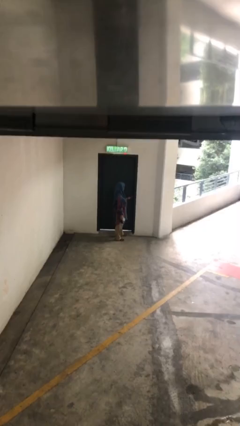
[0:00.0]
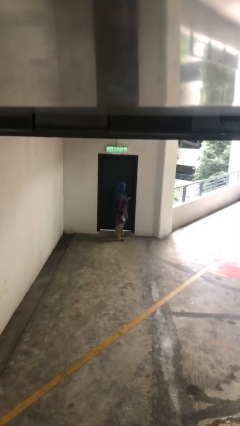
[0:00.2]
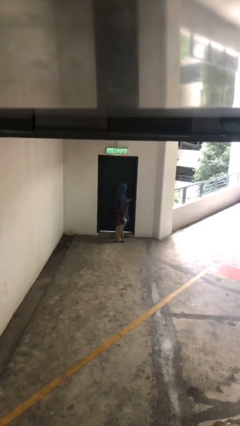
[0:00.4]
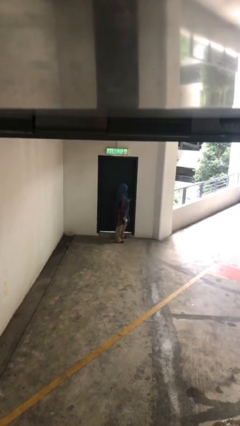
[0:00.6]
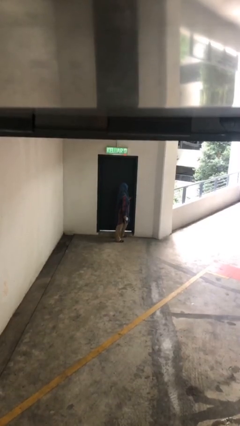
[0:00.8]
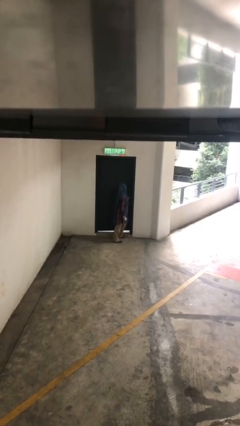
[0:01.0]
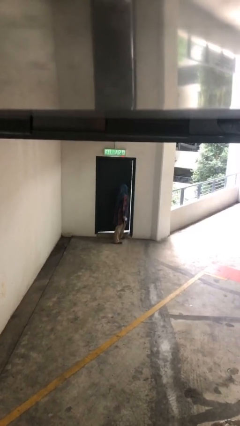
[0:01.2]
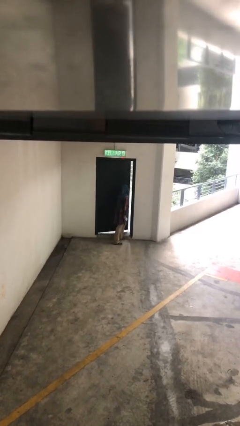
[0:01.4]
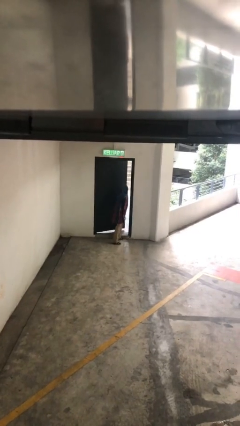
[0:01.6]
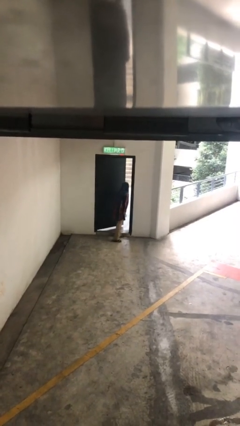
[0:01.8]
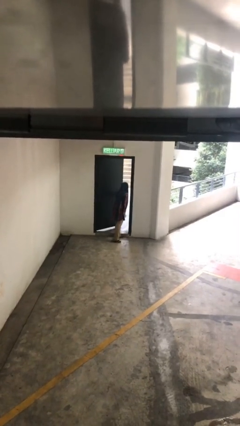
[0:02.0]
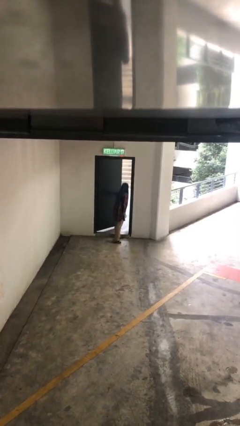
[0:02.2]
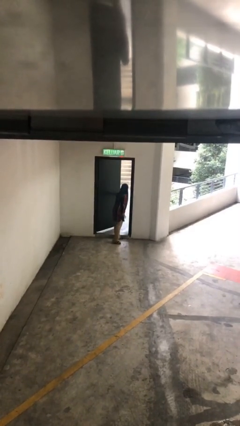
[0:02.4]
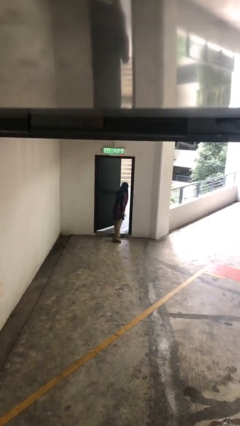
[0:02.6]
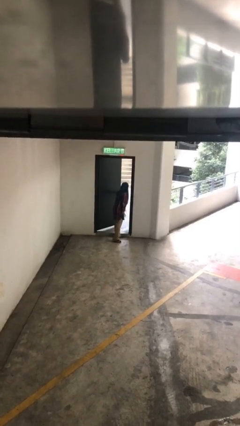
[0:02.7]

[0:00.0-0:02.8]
person opens facility door

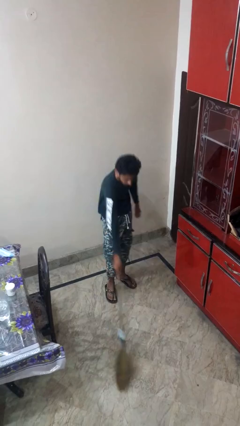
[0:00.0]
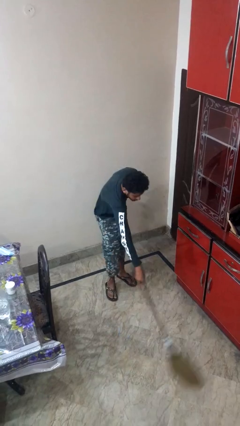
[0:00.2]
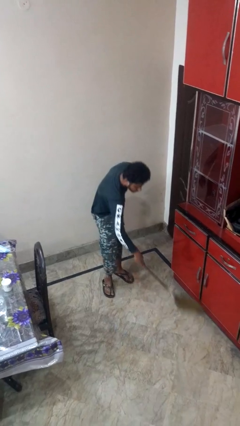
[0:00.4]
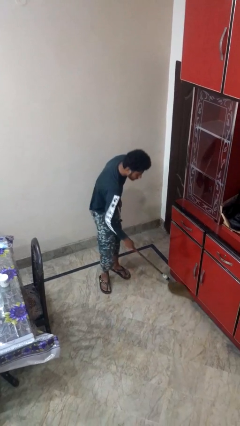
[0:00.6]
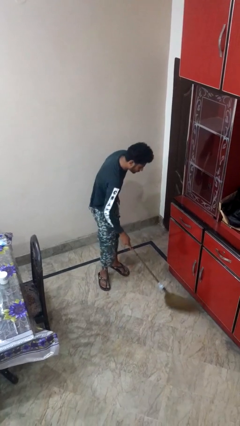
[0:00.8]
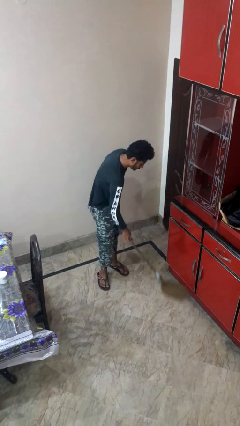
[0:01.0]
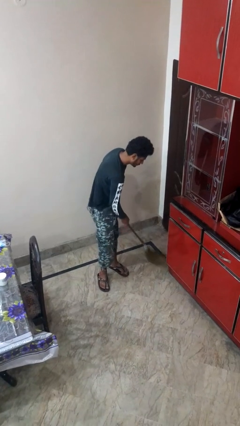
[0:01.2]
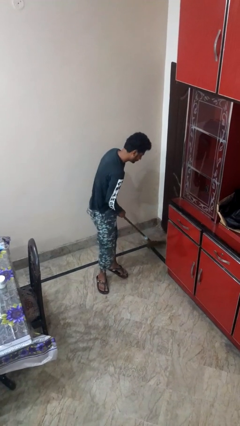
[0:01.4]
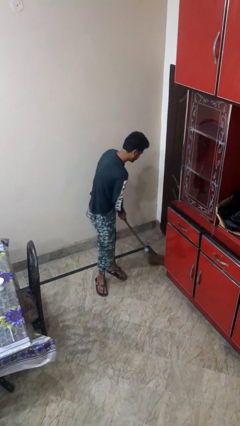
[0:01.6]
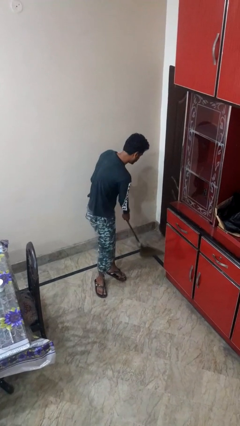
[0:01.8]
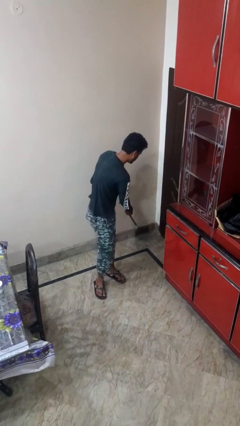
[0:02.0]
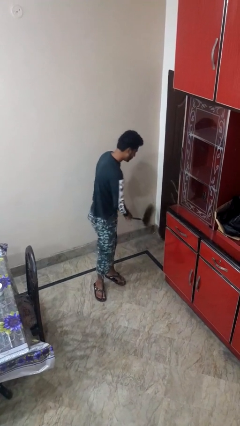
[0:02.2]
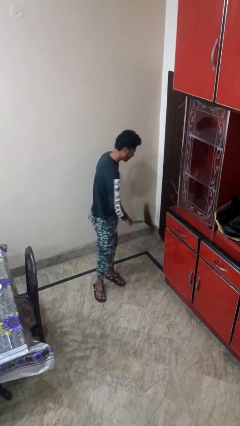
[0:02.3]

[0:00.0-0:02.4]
person sweeps floor

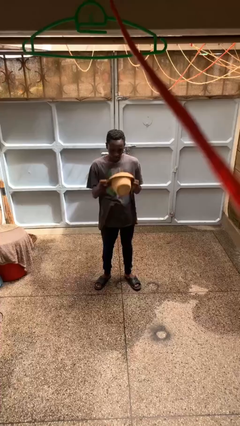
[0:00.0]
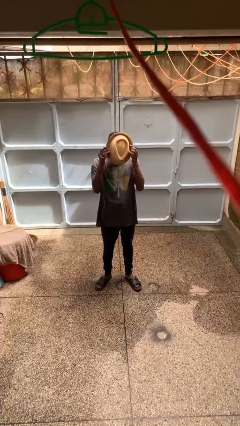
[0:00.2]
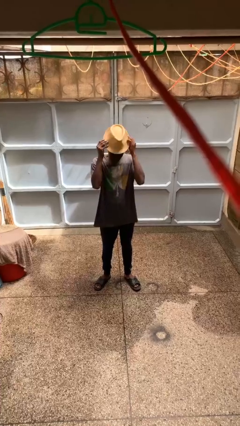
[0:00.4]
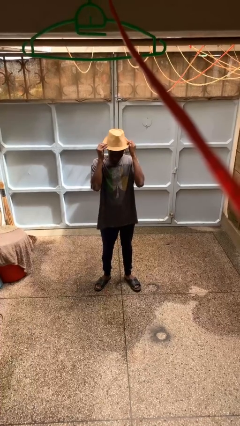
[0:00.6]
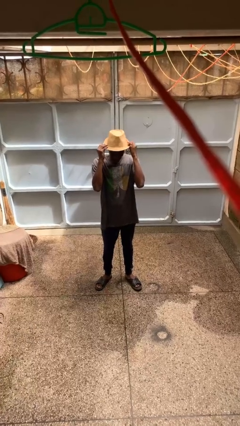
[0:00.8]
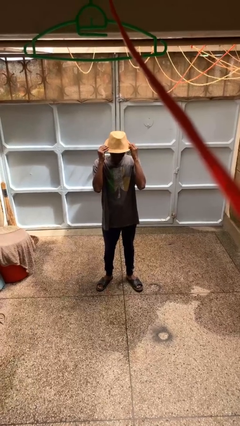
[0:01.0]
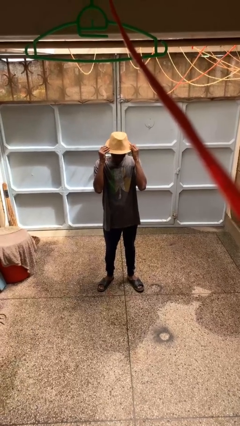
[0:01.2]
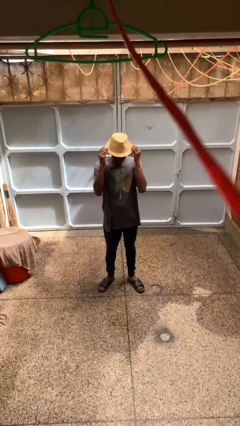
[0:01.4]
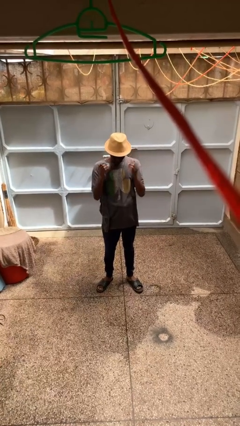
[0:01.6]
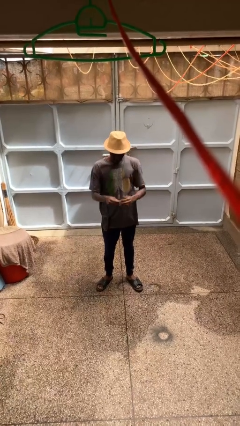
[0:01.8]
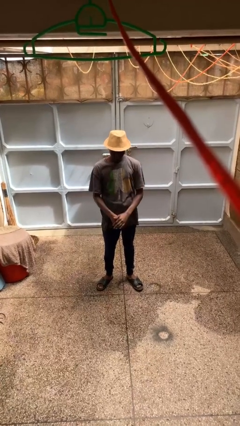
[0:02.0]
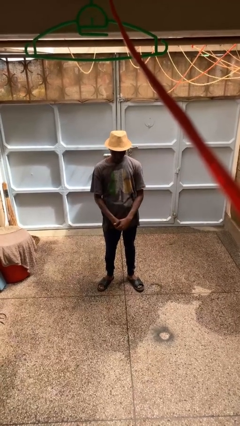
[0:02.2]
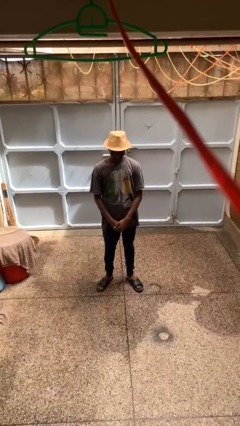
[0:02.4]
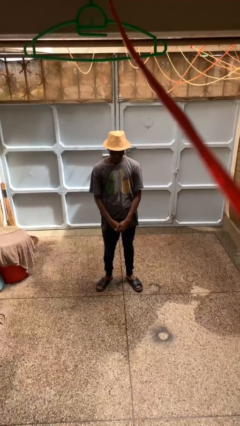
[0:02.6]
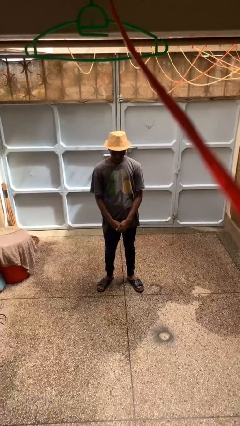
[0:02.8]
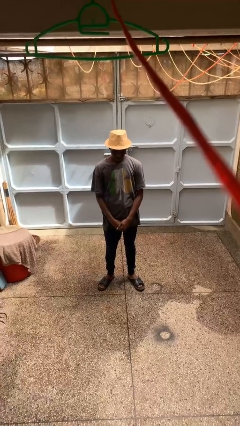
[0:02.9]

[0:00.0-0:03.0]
person puts on hat

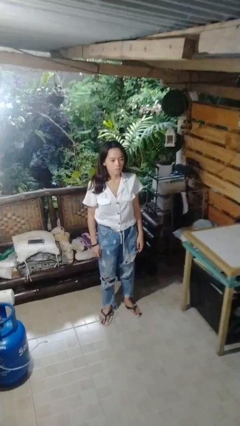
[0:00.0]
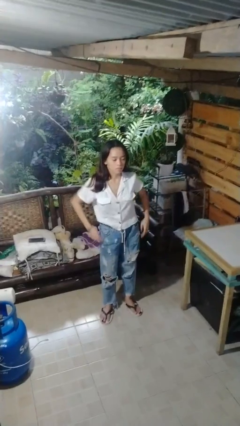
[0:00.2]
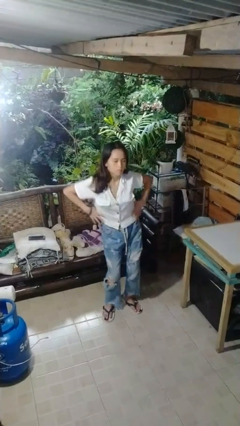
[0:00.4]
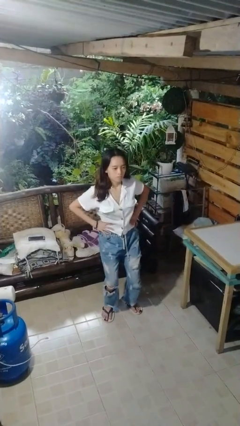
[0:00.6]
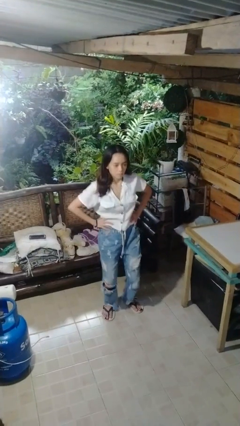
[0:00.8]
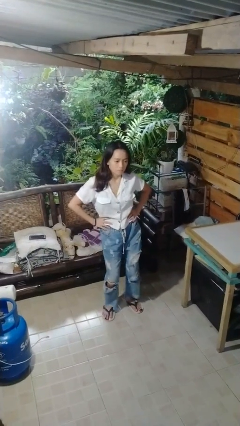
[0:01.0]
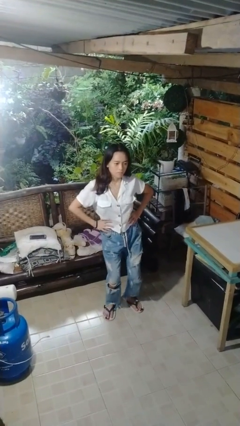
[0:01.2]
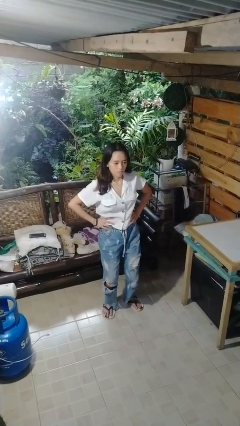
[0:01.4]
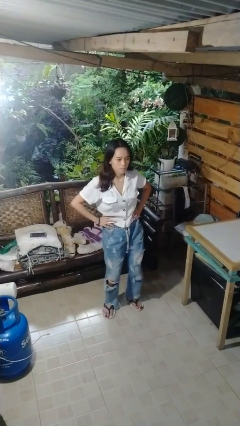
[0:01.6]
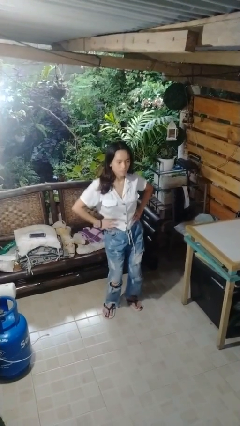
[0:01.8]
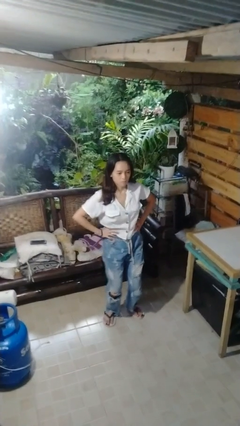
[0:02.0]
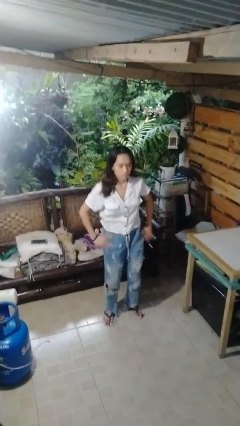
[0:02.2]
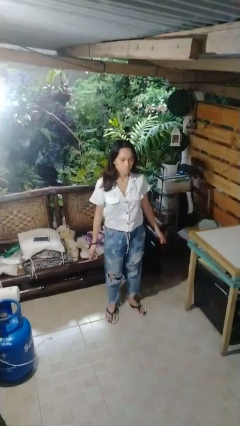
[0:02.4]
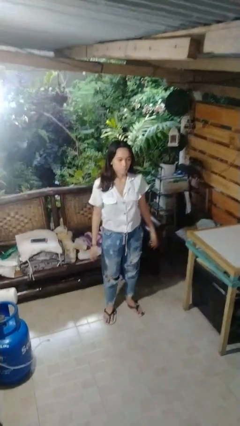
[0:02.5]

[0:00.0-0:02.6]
person wiggles hips

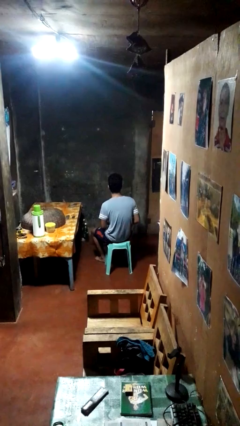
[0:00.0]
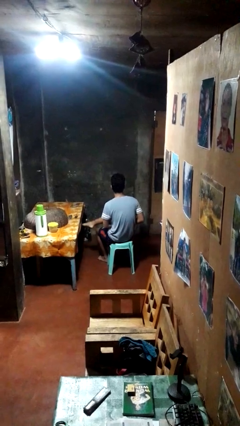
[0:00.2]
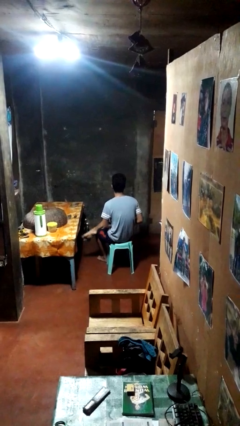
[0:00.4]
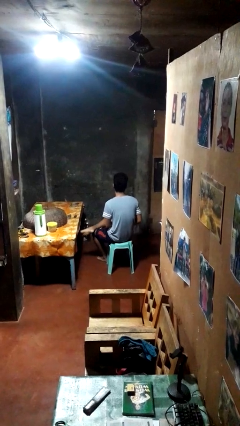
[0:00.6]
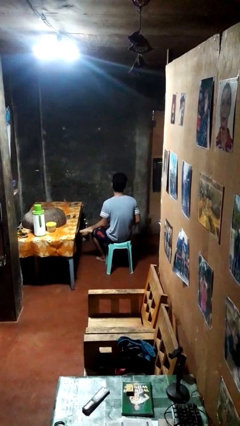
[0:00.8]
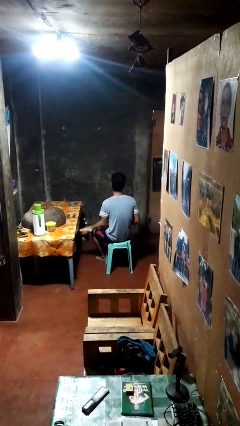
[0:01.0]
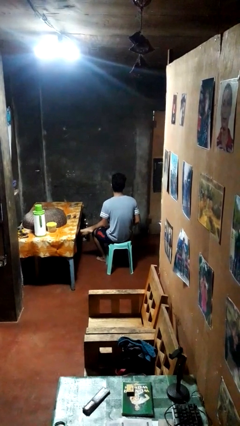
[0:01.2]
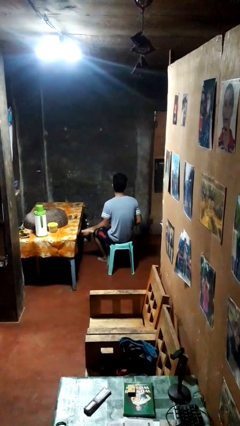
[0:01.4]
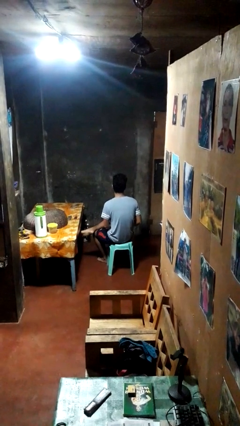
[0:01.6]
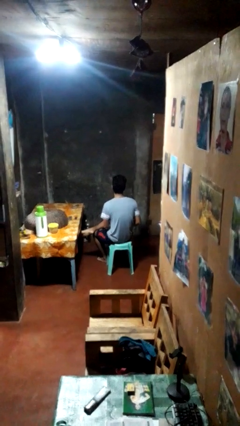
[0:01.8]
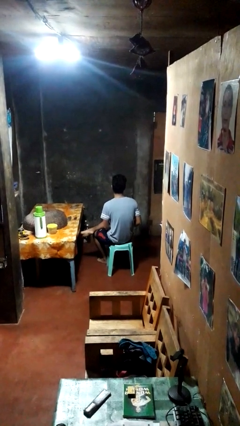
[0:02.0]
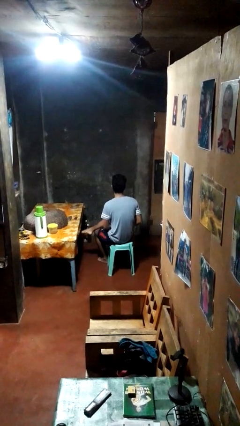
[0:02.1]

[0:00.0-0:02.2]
person crosses legs

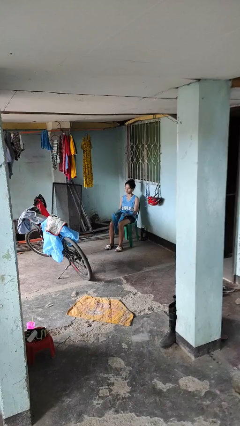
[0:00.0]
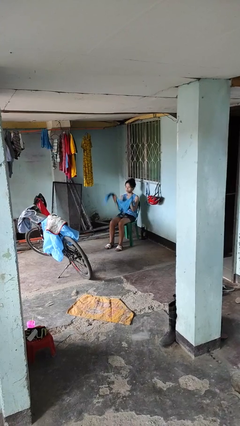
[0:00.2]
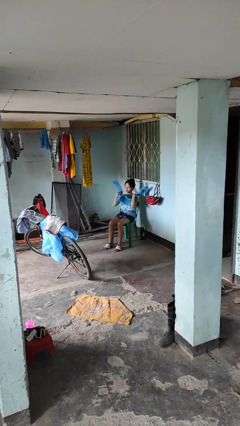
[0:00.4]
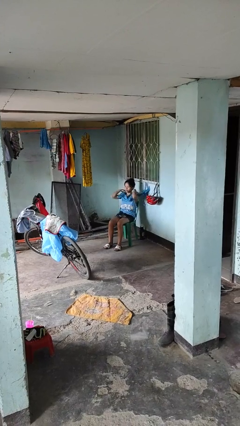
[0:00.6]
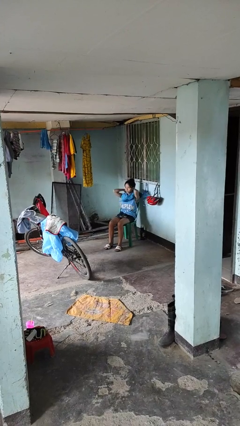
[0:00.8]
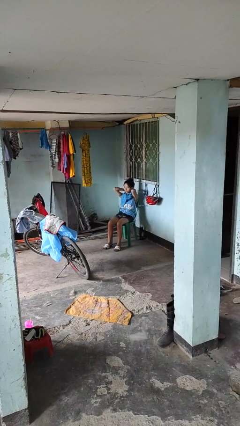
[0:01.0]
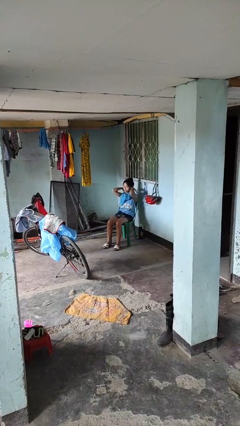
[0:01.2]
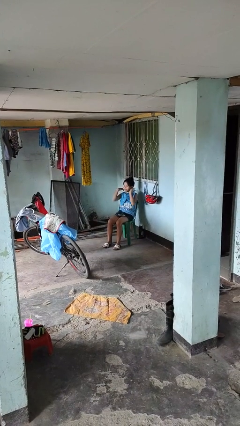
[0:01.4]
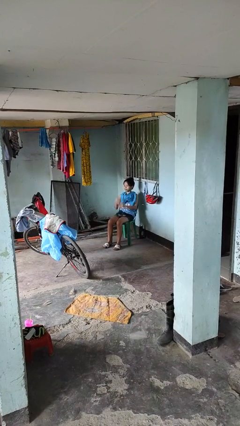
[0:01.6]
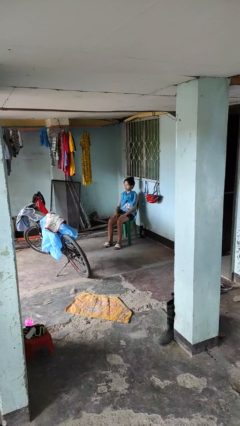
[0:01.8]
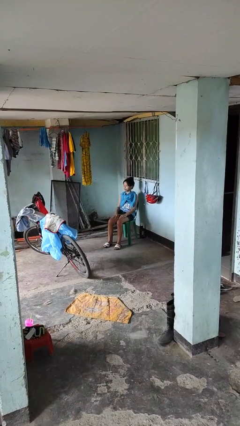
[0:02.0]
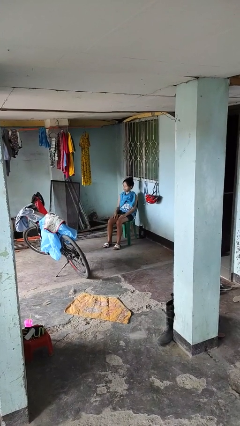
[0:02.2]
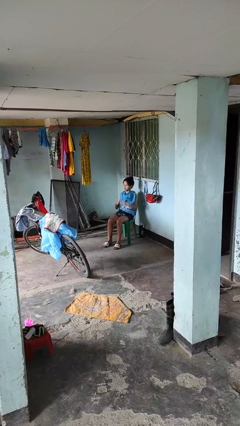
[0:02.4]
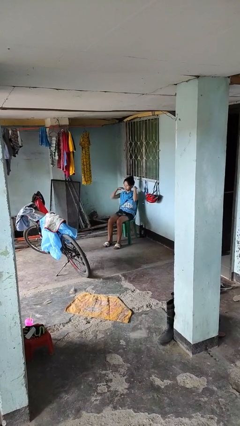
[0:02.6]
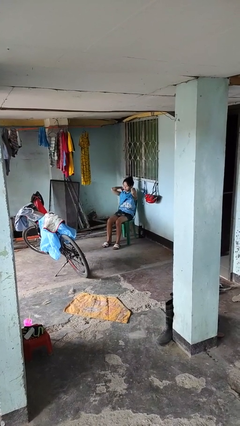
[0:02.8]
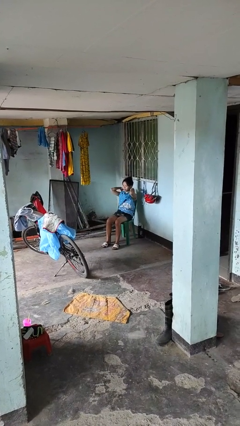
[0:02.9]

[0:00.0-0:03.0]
person puts on scarf

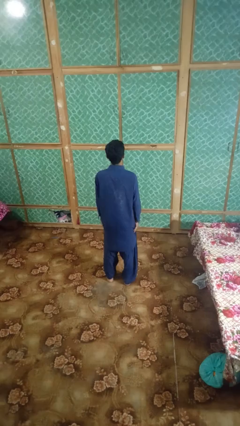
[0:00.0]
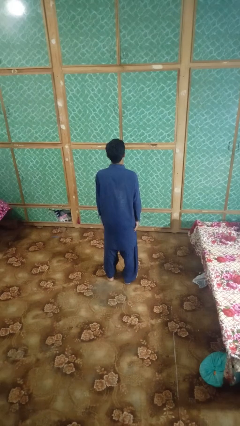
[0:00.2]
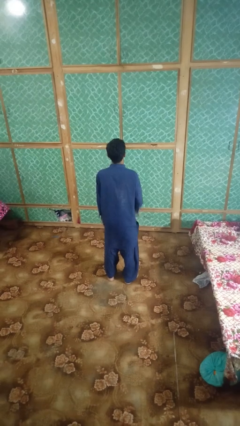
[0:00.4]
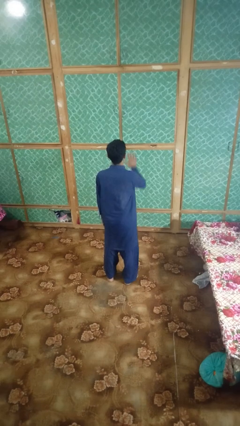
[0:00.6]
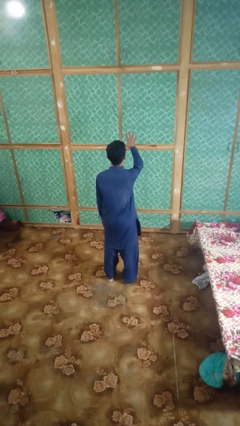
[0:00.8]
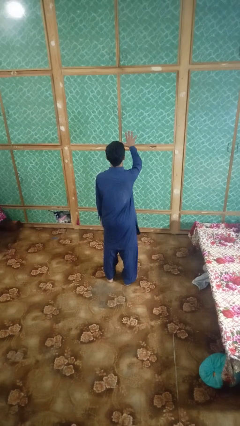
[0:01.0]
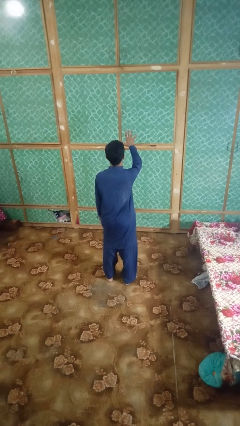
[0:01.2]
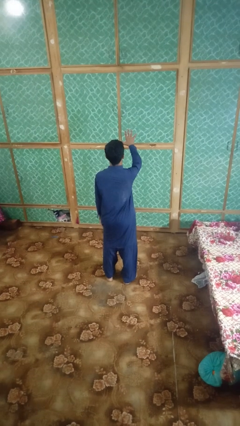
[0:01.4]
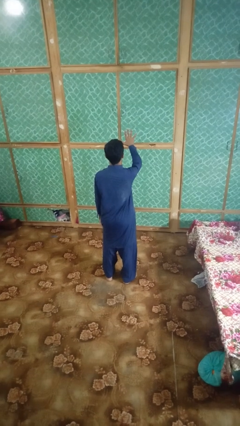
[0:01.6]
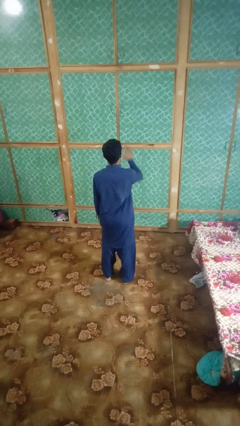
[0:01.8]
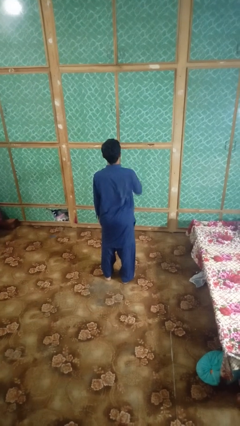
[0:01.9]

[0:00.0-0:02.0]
person gestures number five
